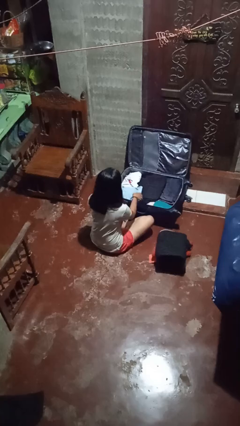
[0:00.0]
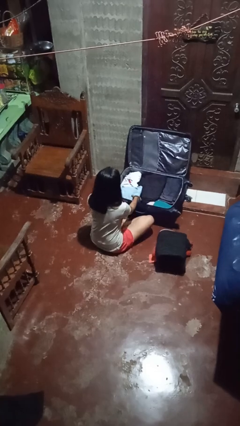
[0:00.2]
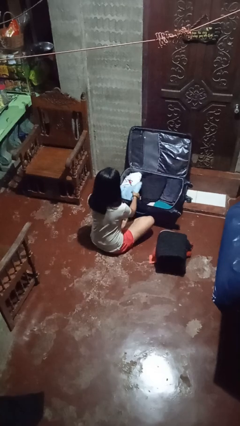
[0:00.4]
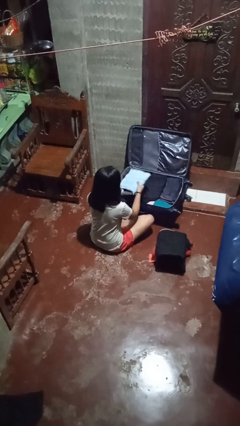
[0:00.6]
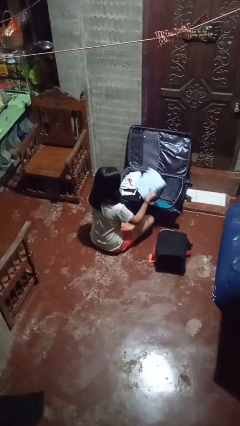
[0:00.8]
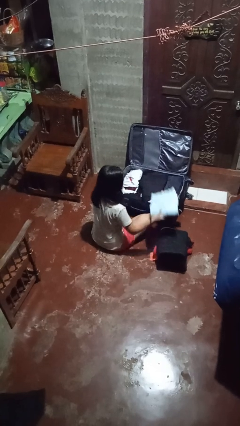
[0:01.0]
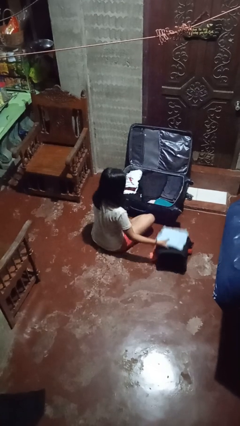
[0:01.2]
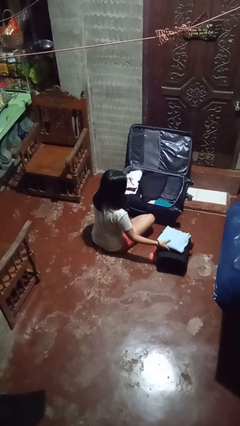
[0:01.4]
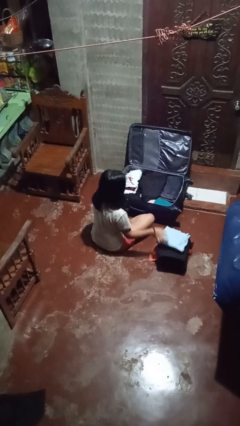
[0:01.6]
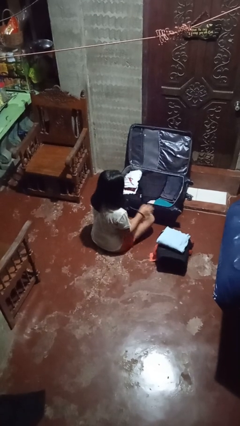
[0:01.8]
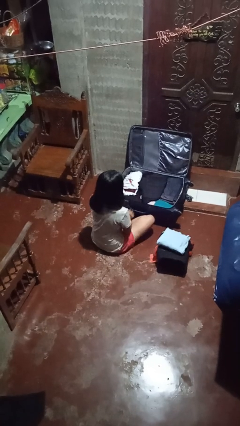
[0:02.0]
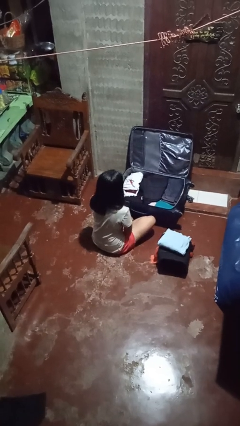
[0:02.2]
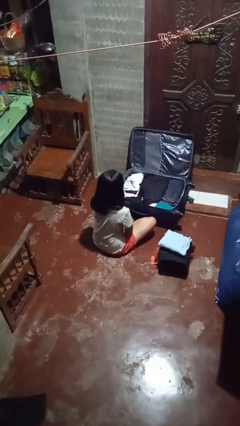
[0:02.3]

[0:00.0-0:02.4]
person unloads clothes from suitcase

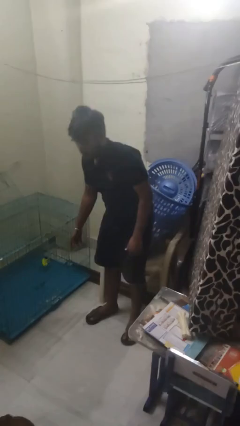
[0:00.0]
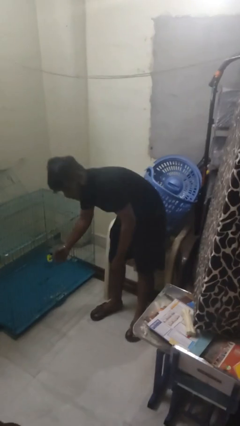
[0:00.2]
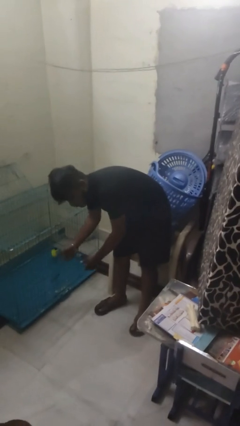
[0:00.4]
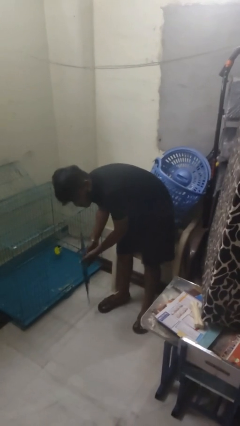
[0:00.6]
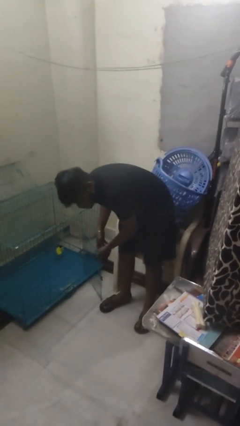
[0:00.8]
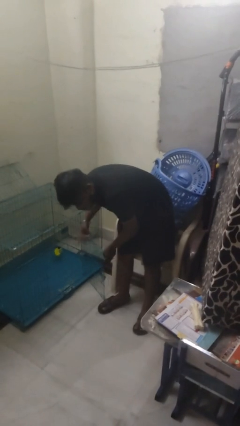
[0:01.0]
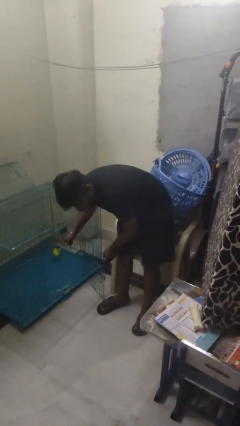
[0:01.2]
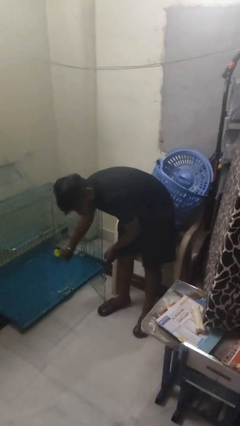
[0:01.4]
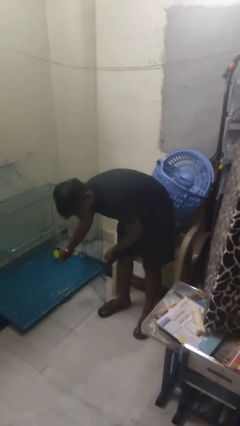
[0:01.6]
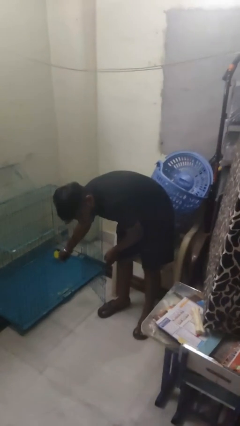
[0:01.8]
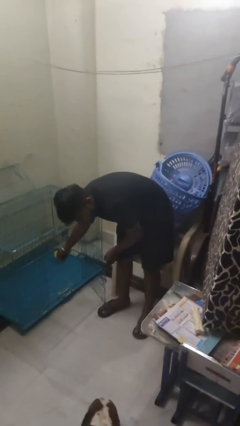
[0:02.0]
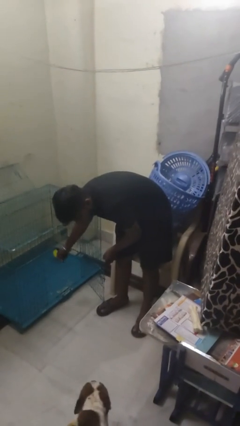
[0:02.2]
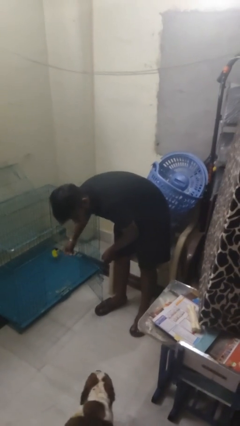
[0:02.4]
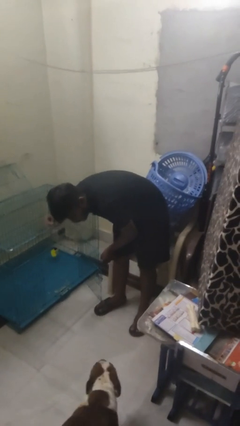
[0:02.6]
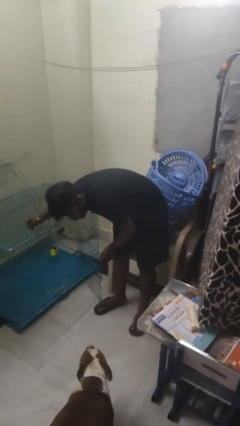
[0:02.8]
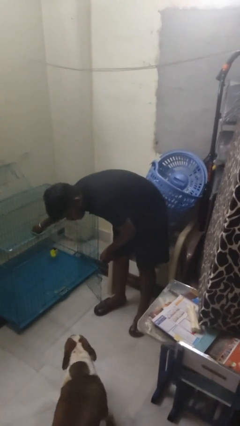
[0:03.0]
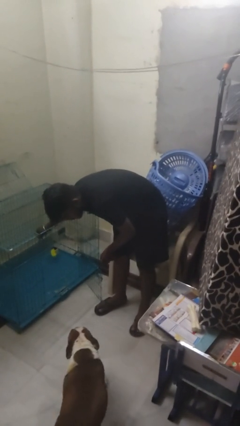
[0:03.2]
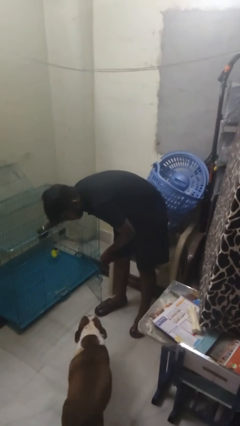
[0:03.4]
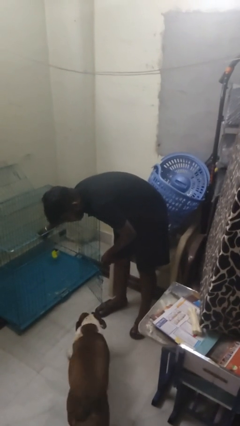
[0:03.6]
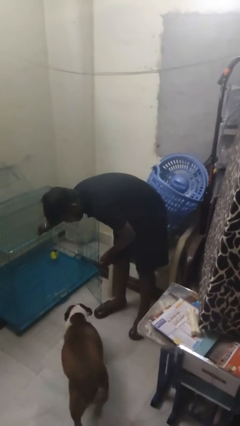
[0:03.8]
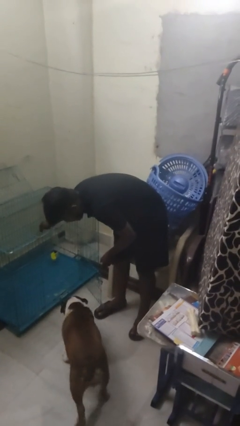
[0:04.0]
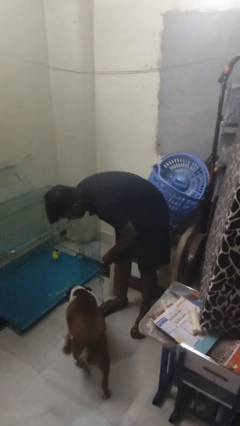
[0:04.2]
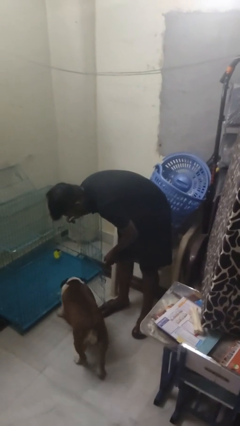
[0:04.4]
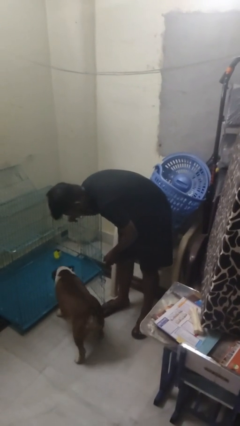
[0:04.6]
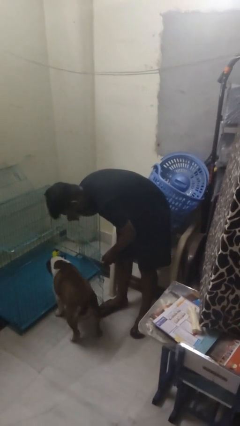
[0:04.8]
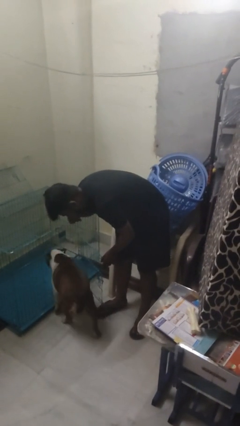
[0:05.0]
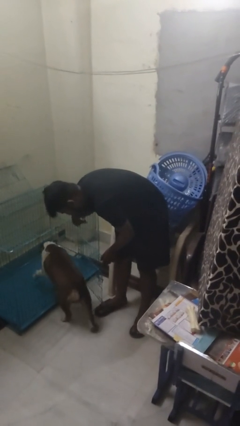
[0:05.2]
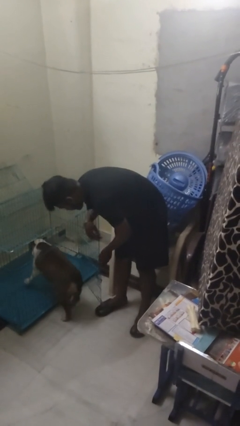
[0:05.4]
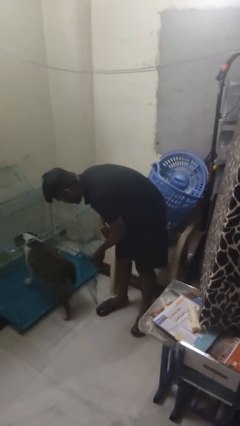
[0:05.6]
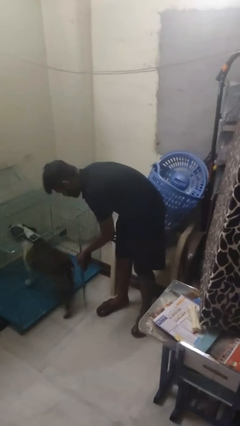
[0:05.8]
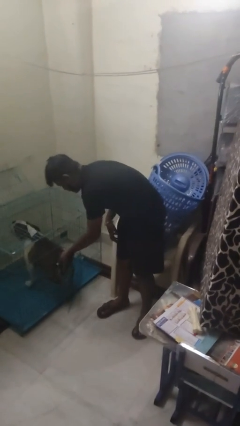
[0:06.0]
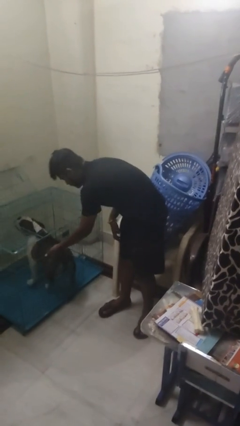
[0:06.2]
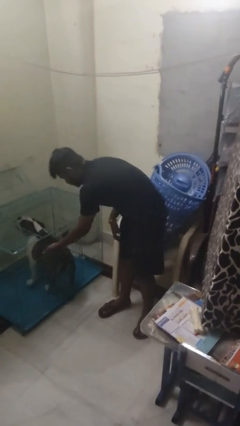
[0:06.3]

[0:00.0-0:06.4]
person crates dog

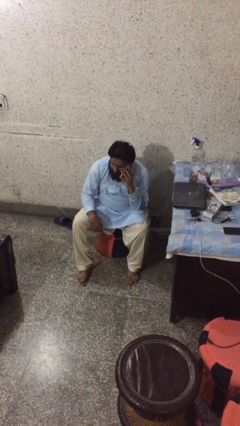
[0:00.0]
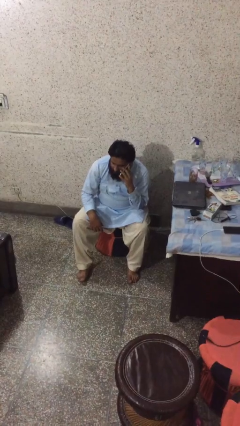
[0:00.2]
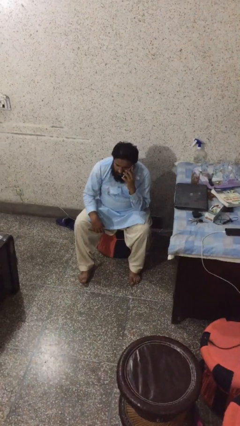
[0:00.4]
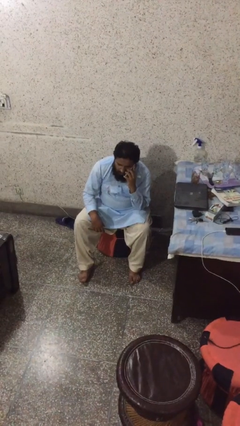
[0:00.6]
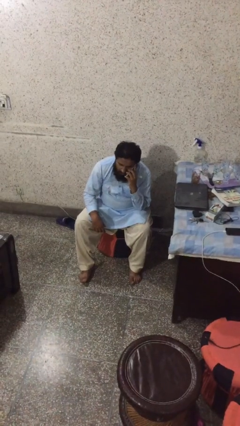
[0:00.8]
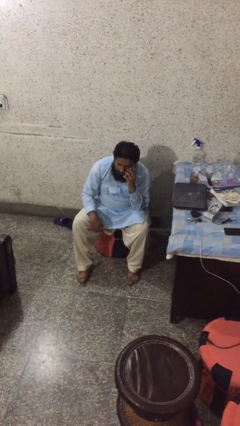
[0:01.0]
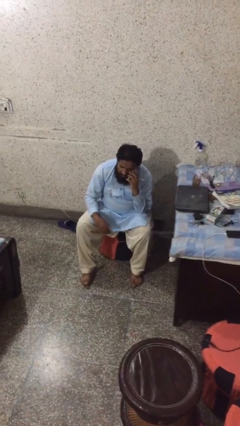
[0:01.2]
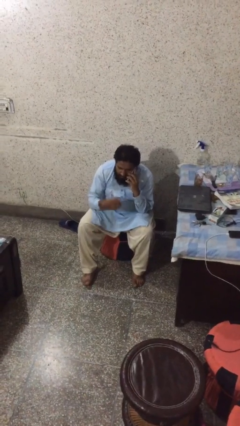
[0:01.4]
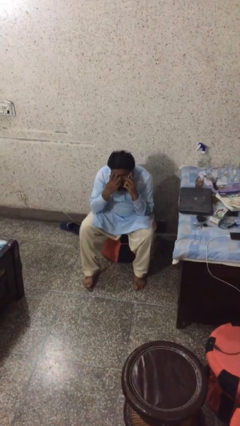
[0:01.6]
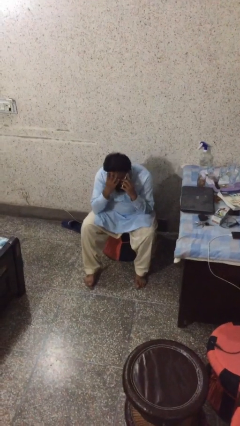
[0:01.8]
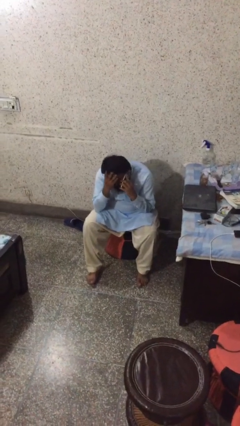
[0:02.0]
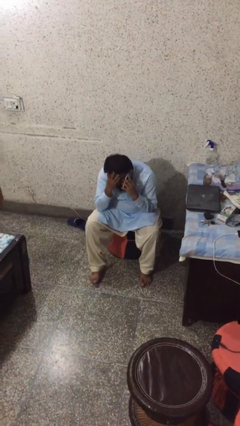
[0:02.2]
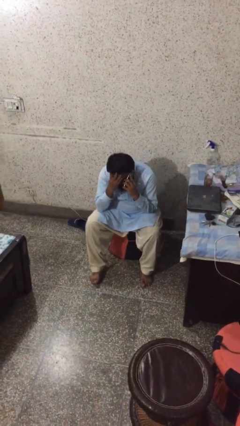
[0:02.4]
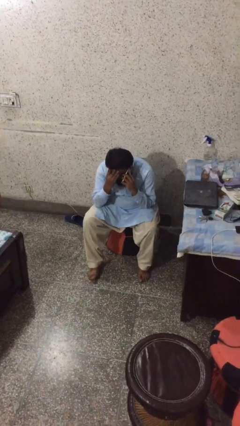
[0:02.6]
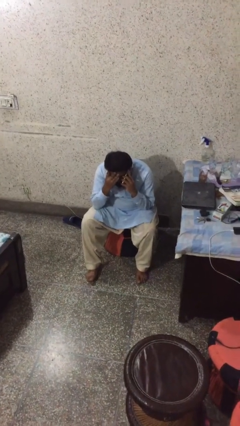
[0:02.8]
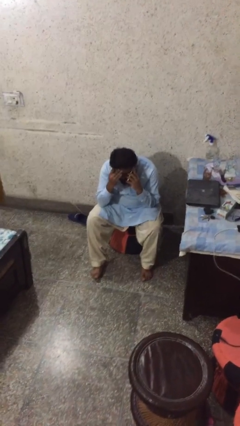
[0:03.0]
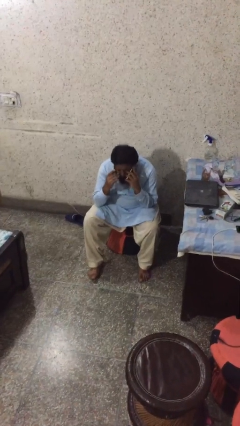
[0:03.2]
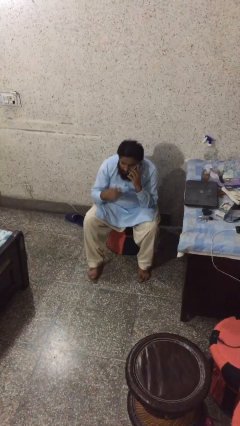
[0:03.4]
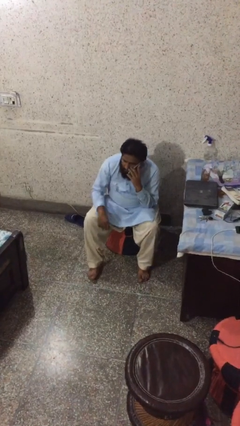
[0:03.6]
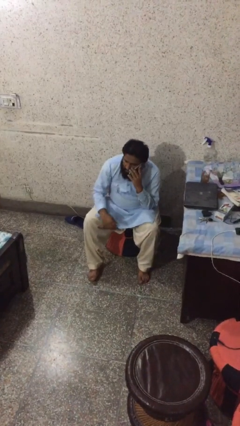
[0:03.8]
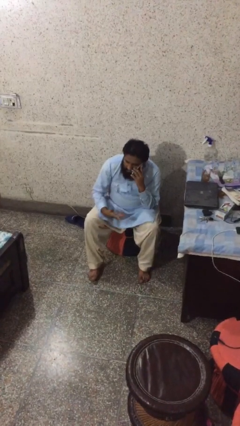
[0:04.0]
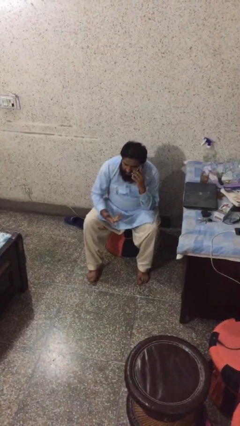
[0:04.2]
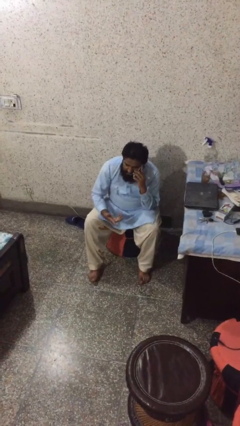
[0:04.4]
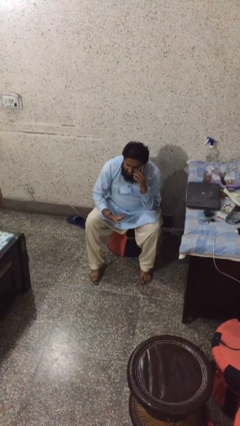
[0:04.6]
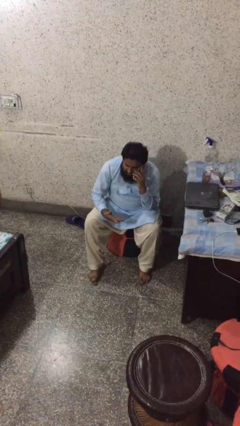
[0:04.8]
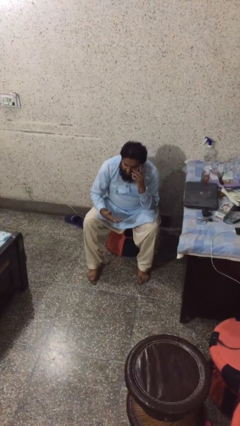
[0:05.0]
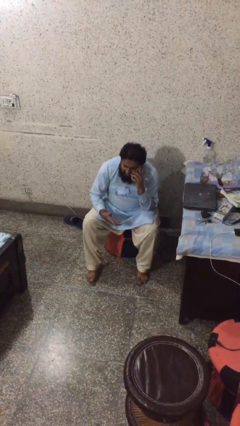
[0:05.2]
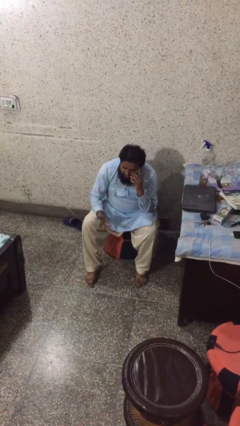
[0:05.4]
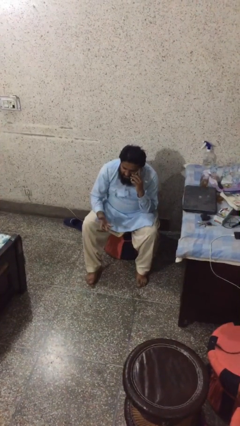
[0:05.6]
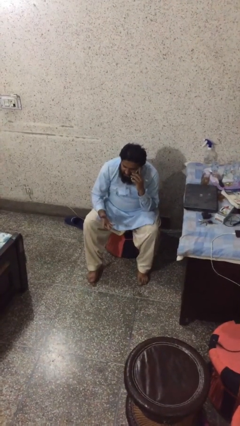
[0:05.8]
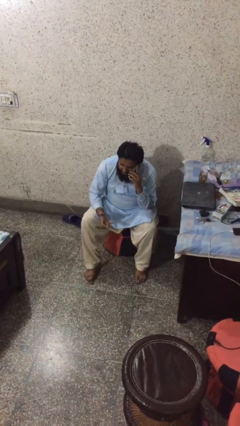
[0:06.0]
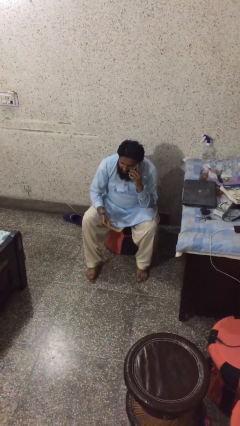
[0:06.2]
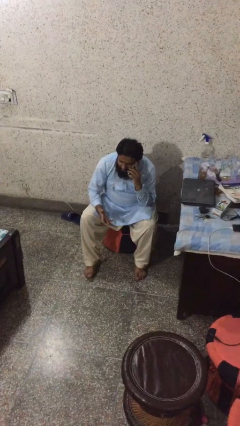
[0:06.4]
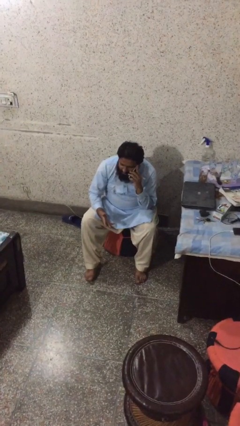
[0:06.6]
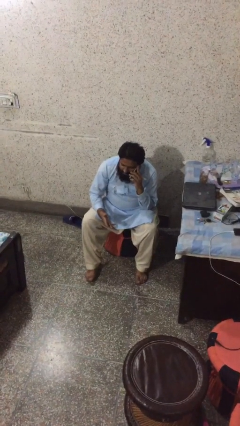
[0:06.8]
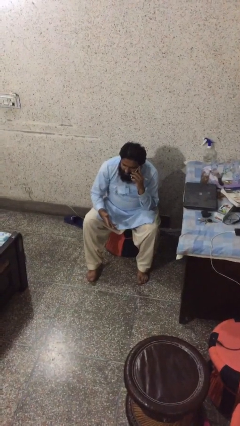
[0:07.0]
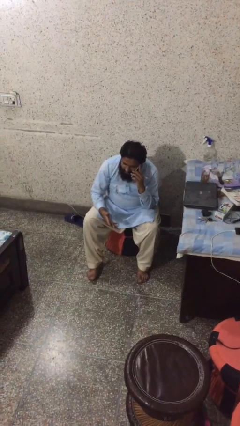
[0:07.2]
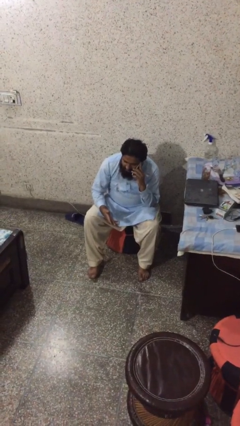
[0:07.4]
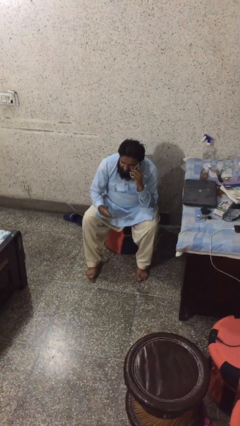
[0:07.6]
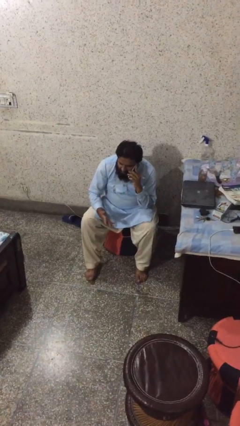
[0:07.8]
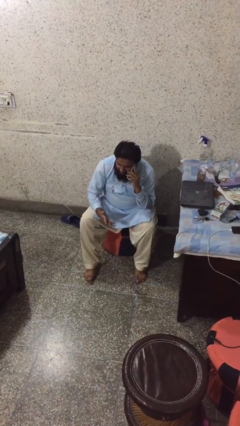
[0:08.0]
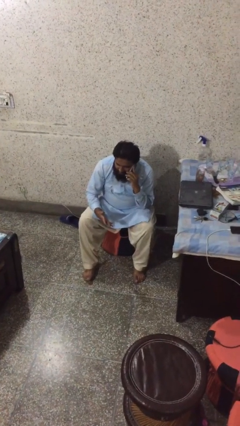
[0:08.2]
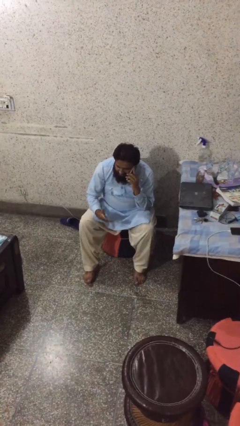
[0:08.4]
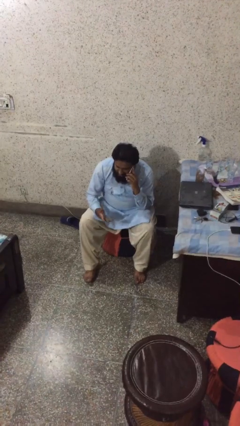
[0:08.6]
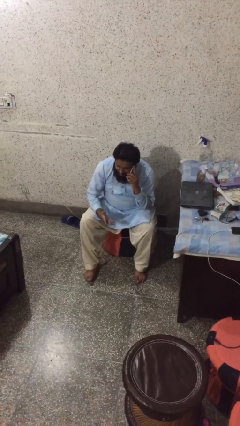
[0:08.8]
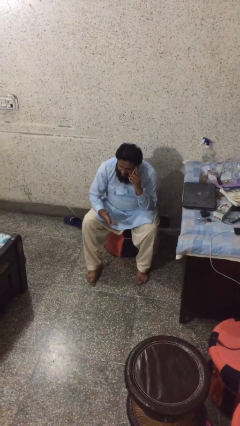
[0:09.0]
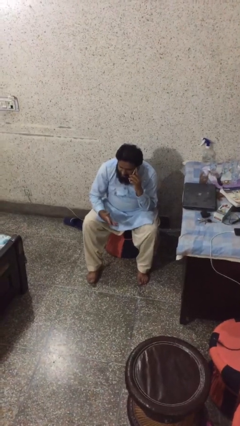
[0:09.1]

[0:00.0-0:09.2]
person talks on phone
